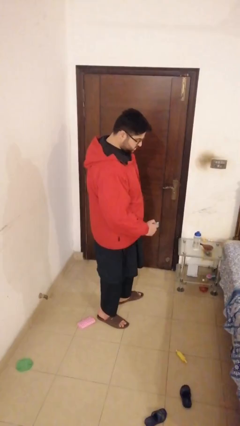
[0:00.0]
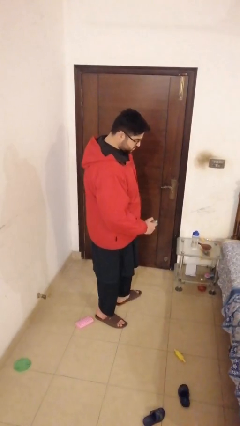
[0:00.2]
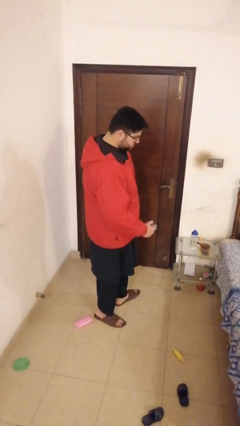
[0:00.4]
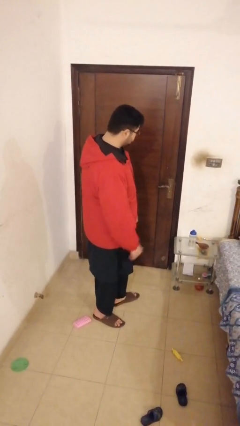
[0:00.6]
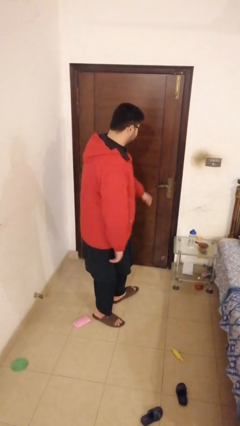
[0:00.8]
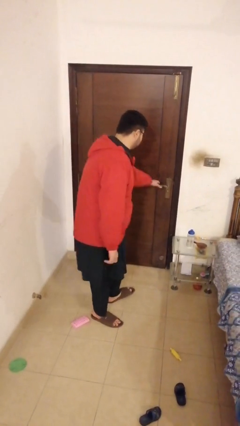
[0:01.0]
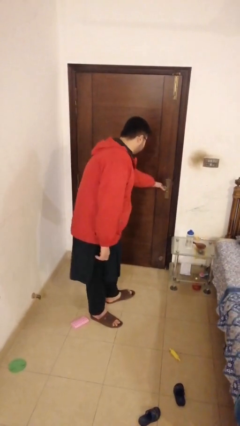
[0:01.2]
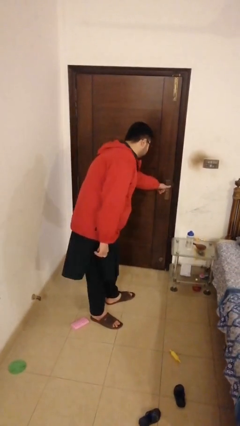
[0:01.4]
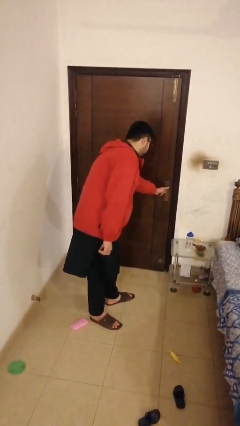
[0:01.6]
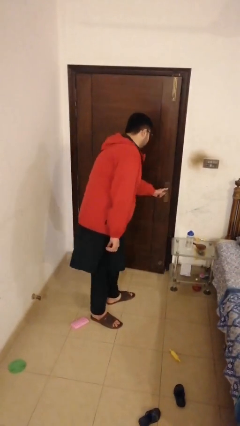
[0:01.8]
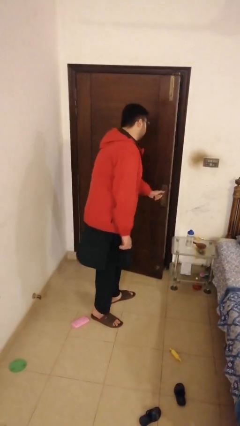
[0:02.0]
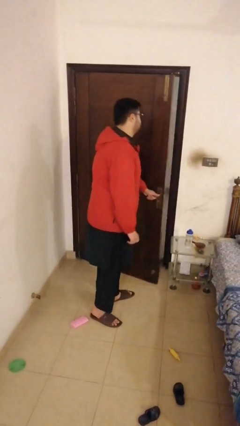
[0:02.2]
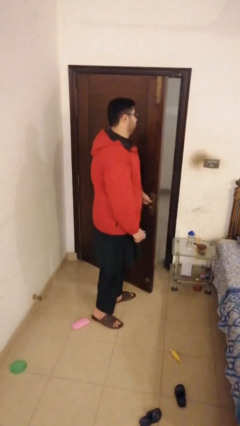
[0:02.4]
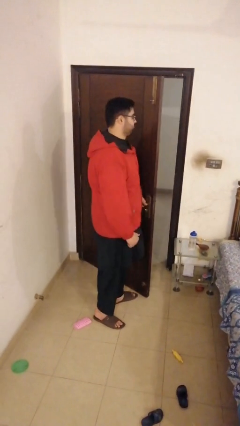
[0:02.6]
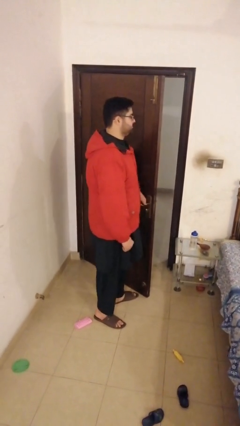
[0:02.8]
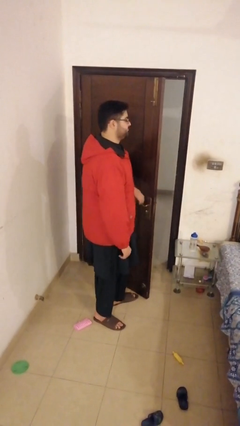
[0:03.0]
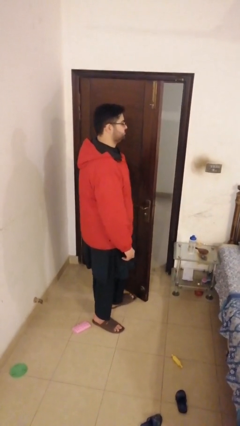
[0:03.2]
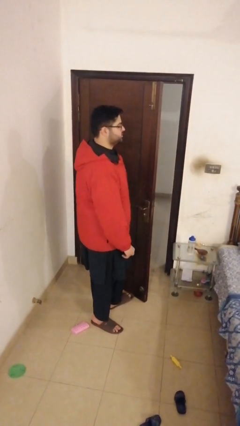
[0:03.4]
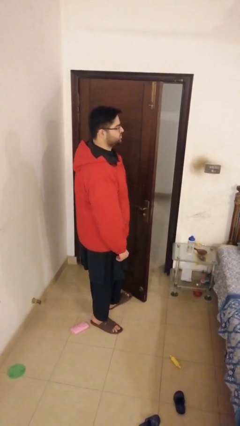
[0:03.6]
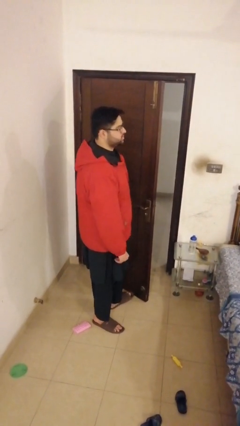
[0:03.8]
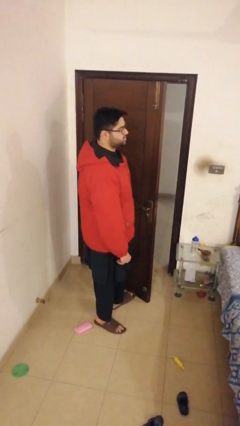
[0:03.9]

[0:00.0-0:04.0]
person opens facility door

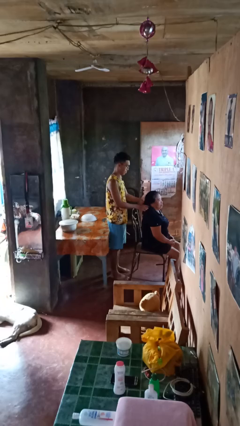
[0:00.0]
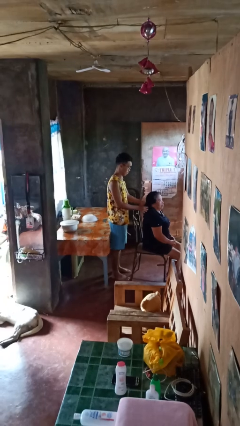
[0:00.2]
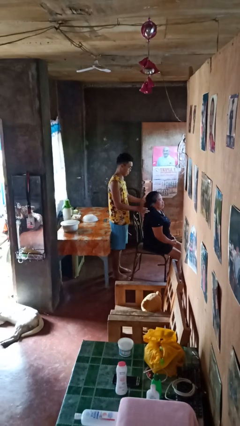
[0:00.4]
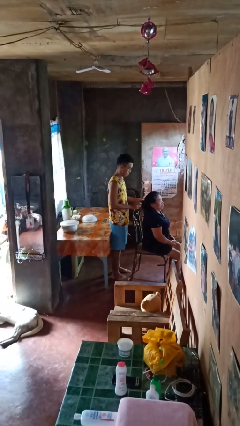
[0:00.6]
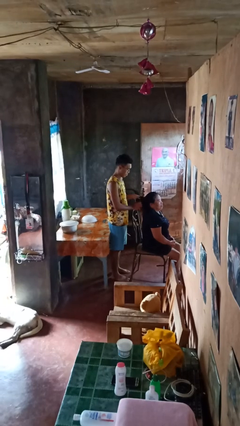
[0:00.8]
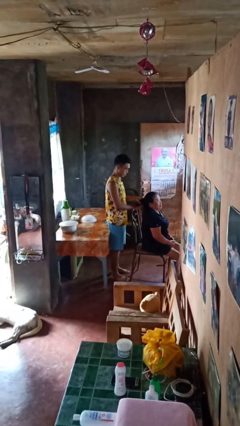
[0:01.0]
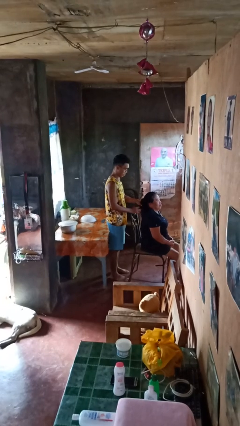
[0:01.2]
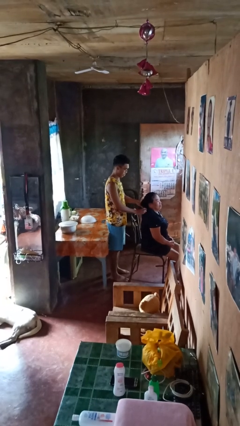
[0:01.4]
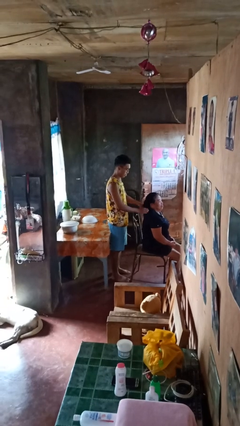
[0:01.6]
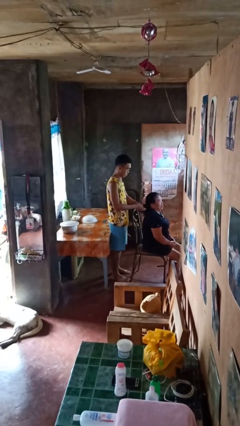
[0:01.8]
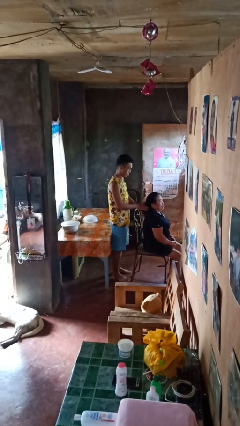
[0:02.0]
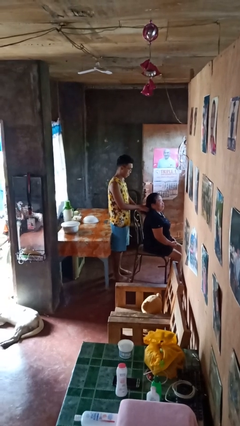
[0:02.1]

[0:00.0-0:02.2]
person braids hair of person

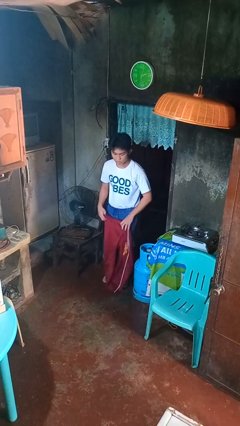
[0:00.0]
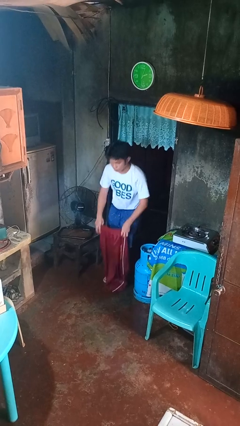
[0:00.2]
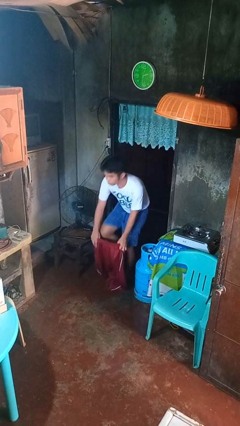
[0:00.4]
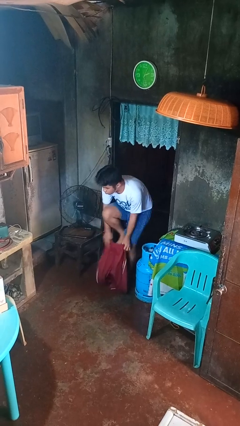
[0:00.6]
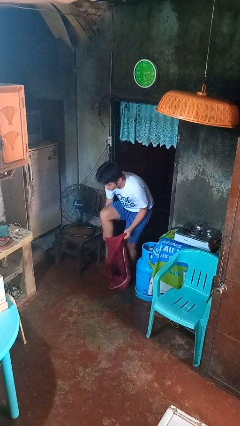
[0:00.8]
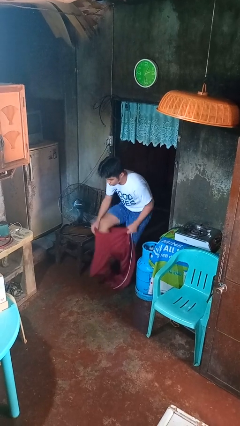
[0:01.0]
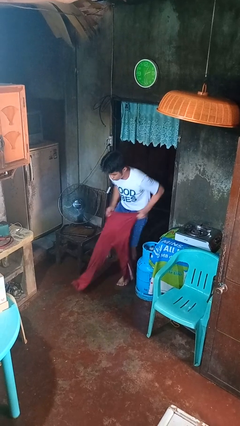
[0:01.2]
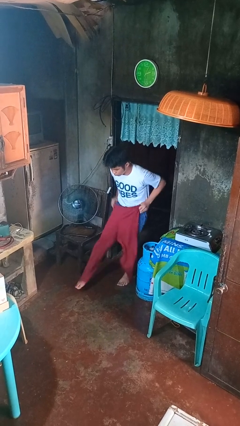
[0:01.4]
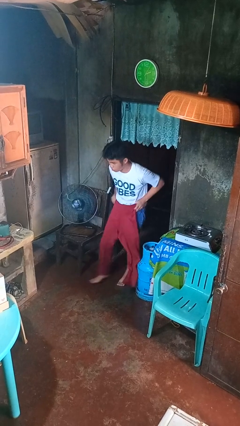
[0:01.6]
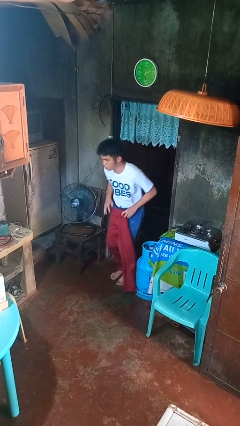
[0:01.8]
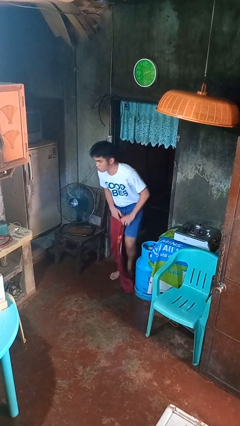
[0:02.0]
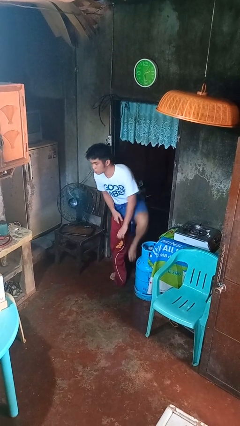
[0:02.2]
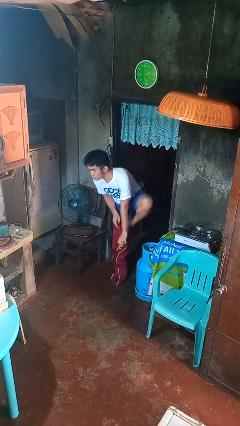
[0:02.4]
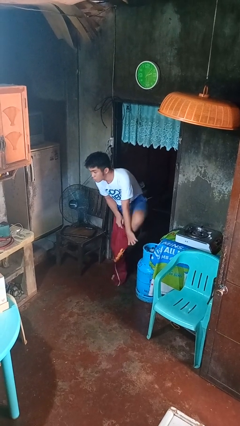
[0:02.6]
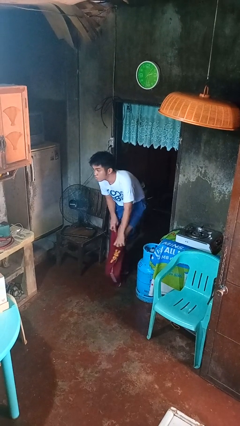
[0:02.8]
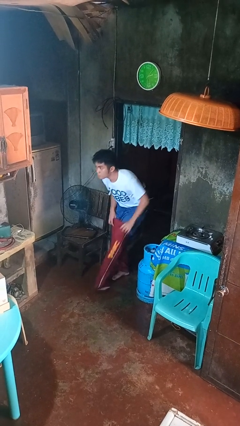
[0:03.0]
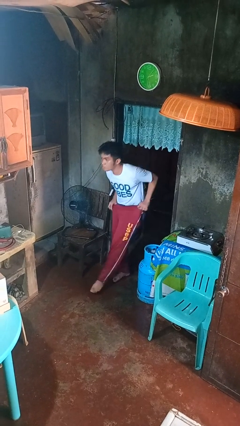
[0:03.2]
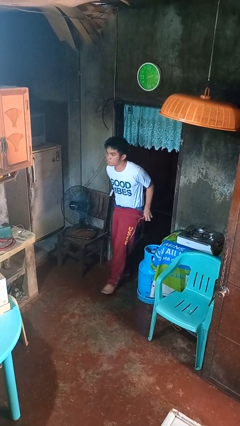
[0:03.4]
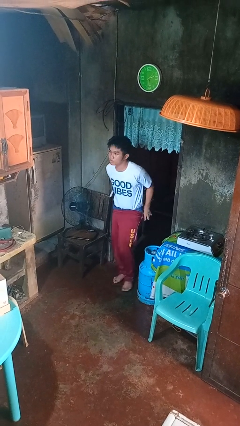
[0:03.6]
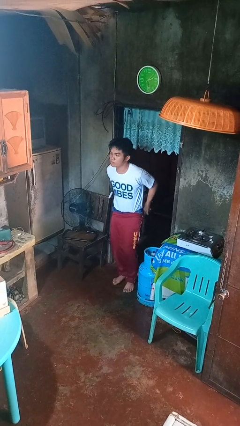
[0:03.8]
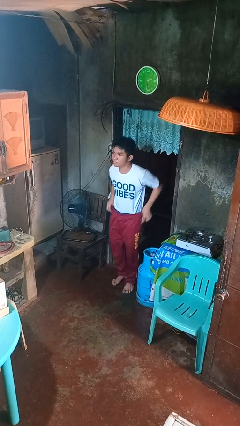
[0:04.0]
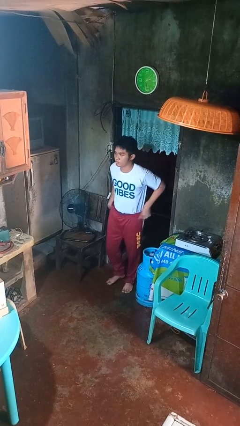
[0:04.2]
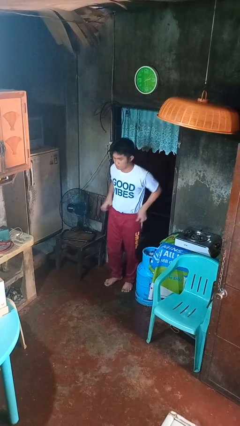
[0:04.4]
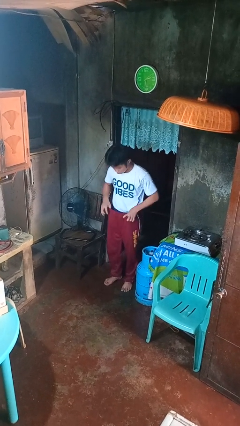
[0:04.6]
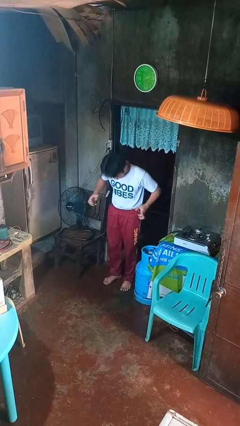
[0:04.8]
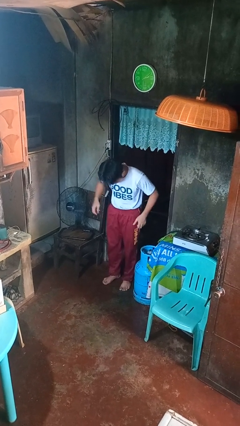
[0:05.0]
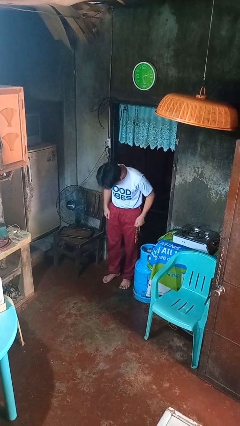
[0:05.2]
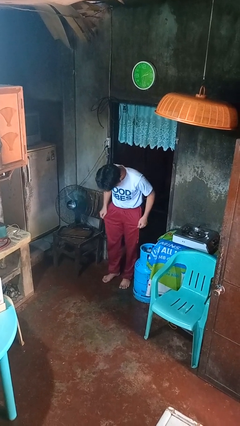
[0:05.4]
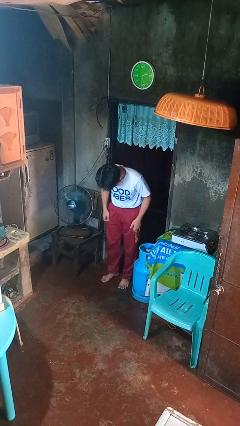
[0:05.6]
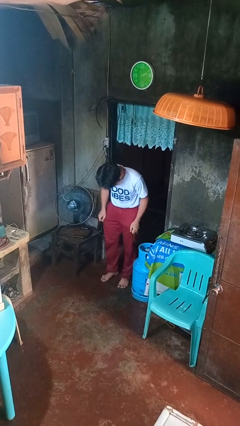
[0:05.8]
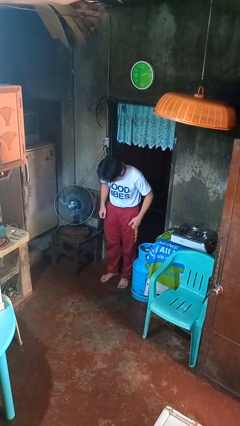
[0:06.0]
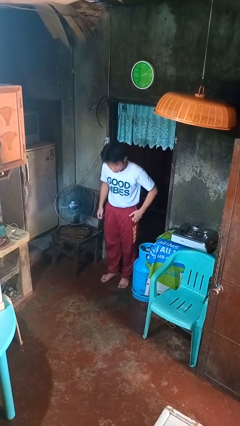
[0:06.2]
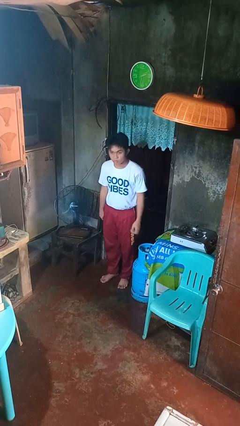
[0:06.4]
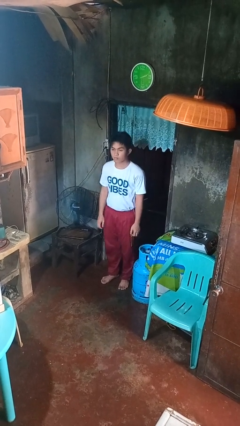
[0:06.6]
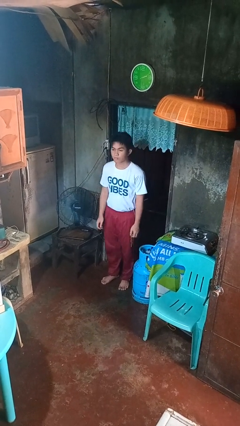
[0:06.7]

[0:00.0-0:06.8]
person puts on pants

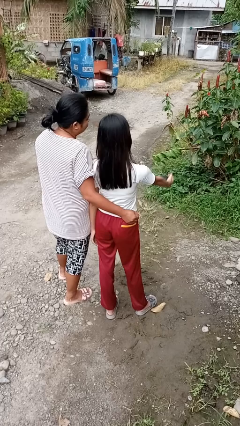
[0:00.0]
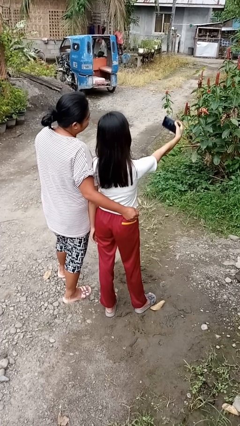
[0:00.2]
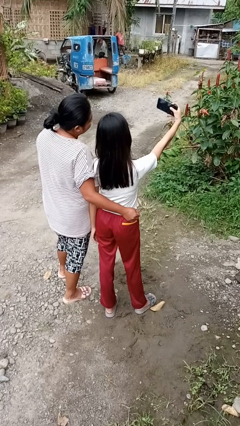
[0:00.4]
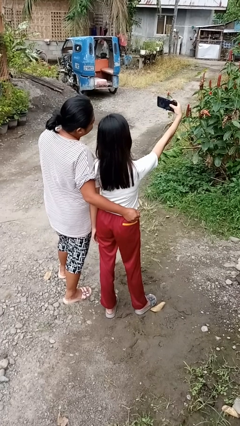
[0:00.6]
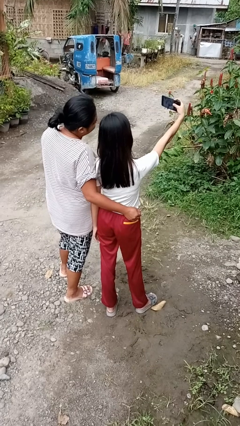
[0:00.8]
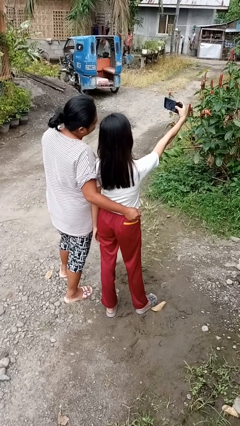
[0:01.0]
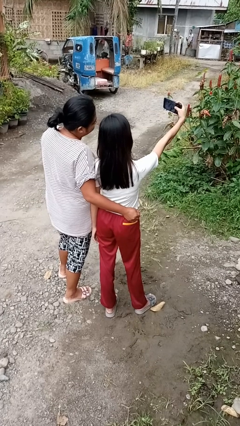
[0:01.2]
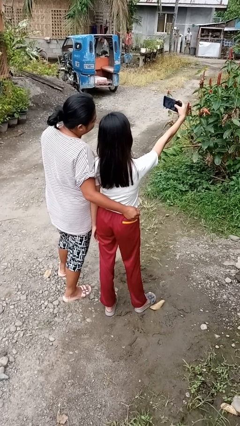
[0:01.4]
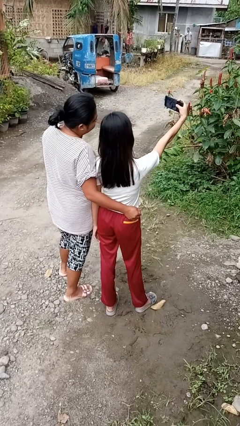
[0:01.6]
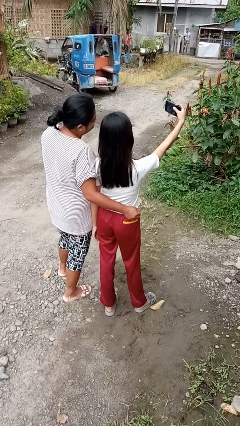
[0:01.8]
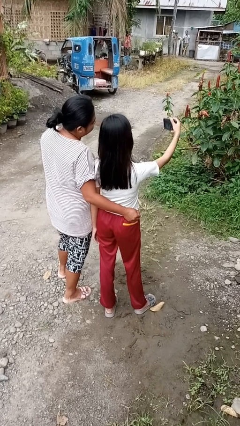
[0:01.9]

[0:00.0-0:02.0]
person takes selfie with person

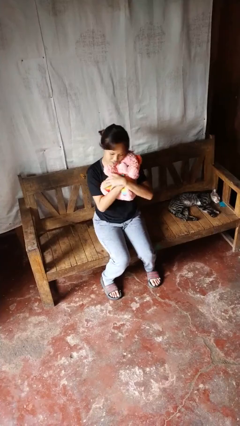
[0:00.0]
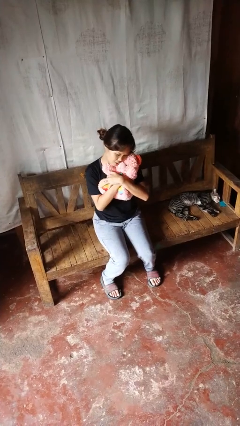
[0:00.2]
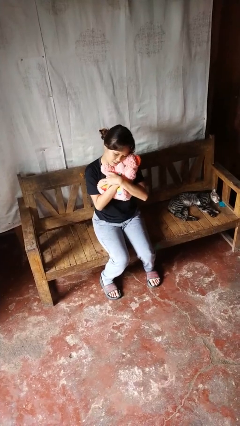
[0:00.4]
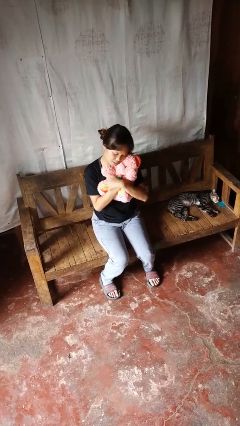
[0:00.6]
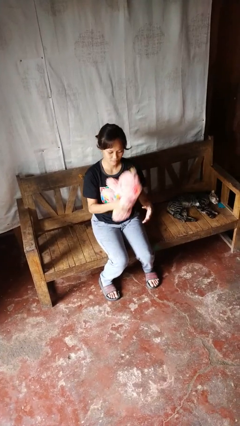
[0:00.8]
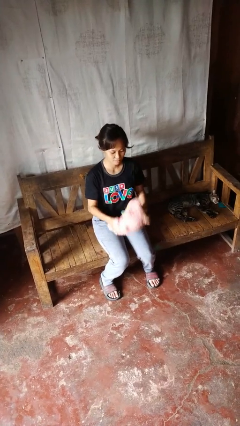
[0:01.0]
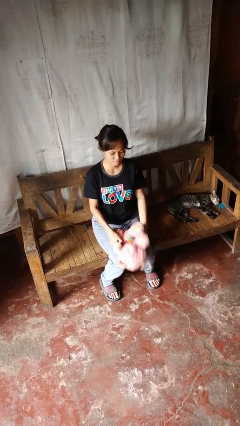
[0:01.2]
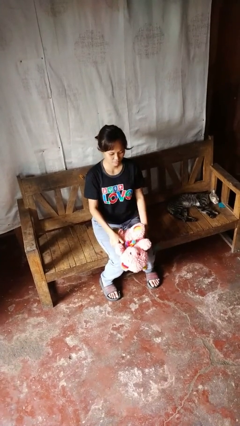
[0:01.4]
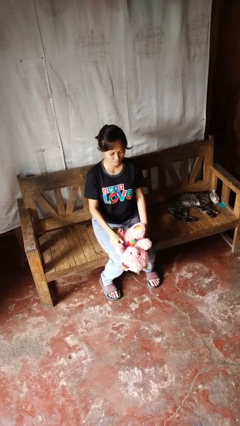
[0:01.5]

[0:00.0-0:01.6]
person hugs stuffed animal

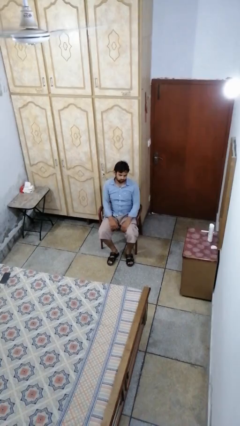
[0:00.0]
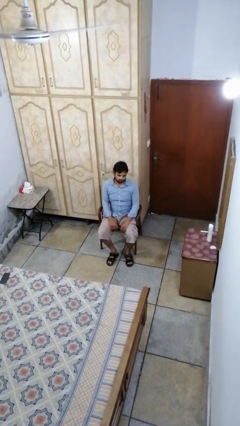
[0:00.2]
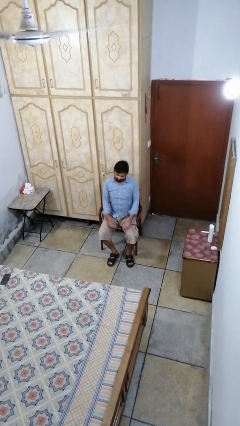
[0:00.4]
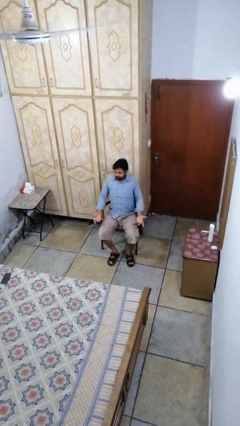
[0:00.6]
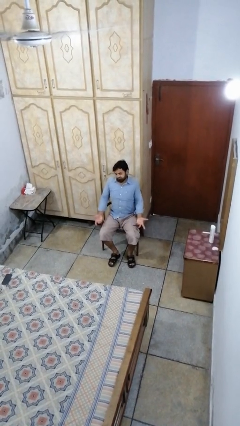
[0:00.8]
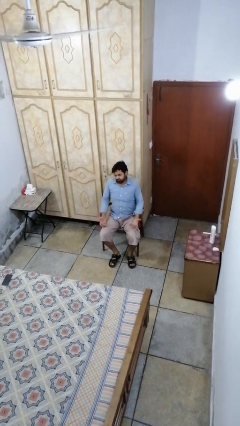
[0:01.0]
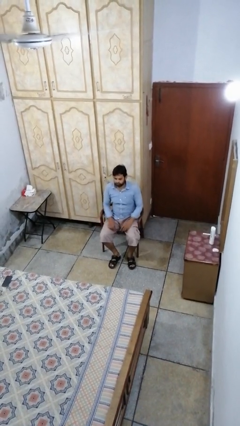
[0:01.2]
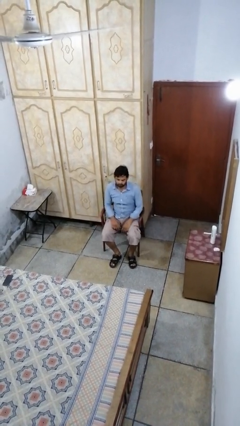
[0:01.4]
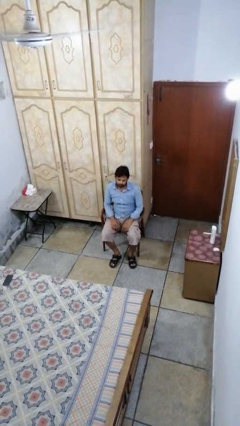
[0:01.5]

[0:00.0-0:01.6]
person shrugs
